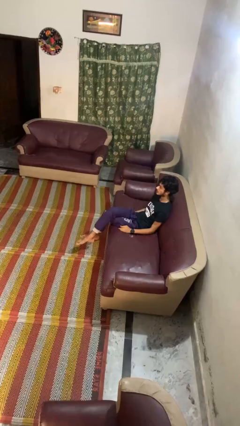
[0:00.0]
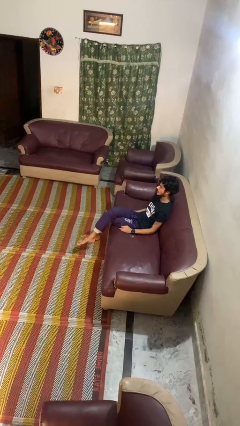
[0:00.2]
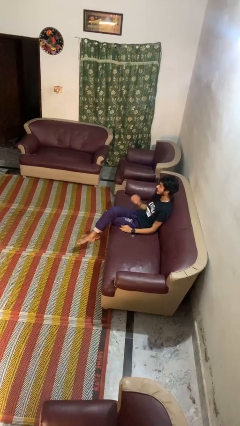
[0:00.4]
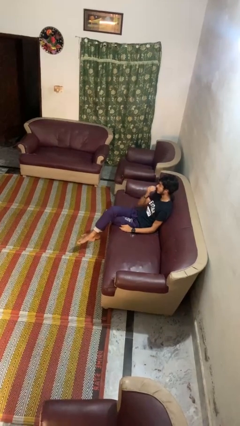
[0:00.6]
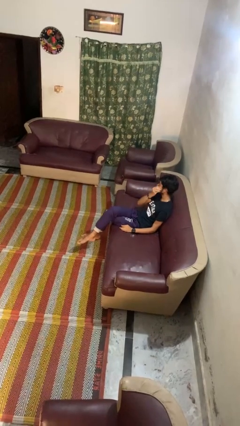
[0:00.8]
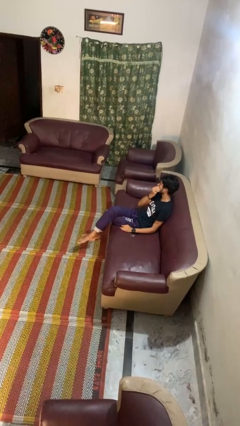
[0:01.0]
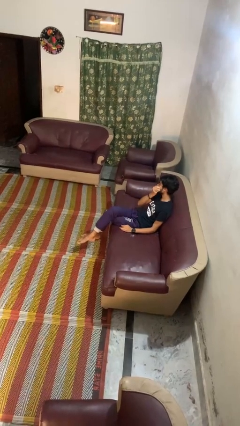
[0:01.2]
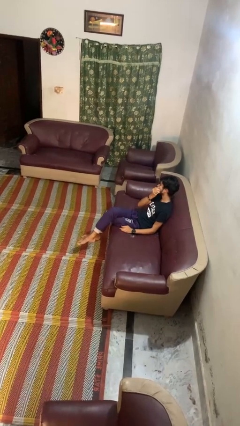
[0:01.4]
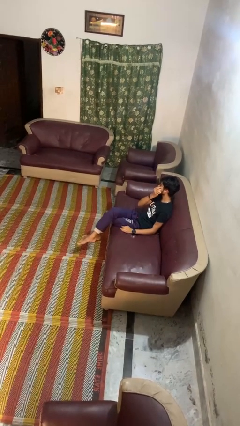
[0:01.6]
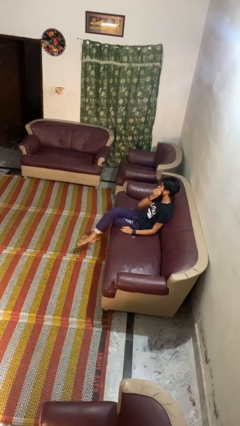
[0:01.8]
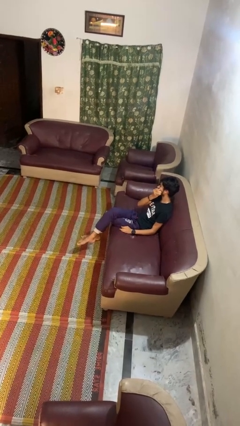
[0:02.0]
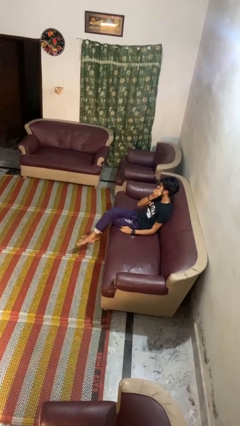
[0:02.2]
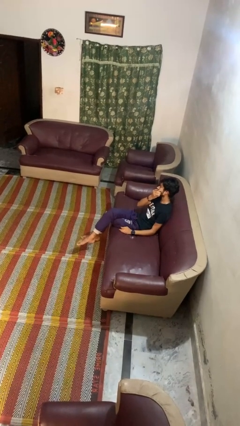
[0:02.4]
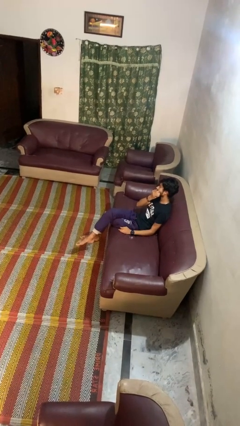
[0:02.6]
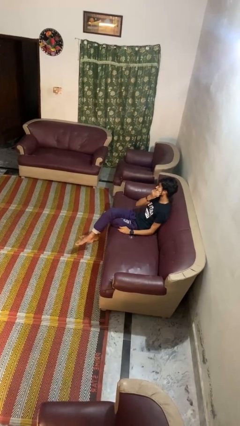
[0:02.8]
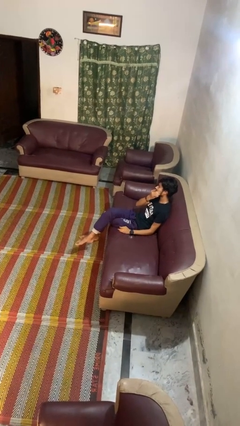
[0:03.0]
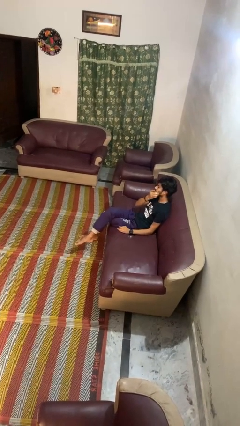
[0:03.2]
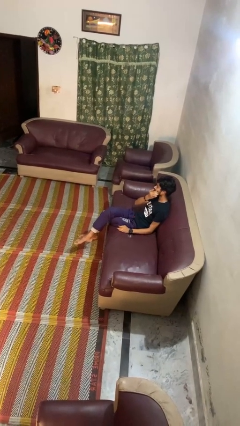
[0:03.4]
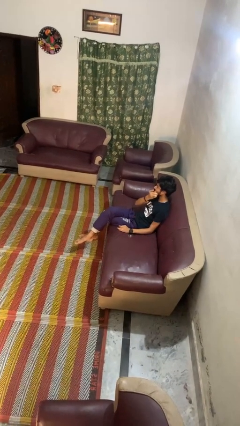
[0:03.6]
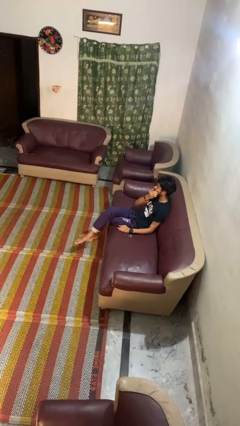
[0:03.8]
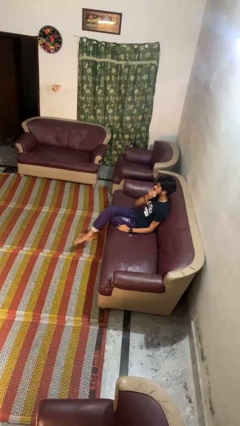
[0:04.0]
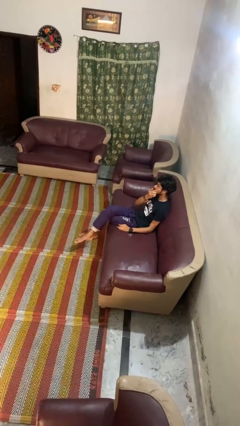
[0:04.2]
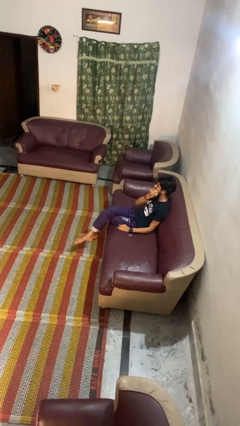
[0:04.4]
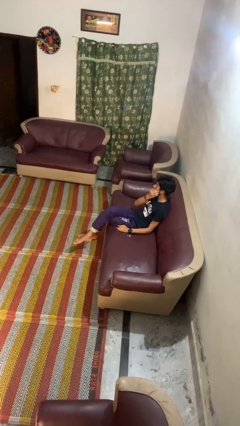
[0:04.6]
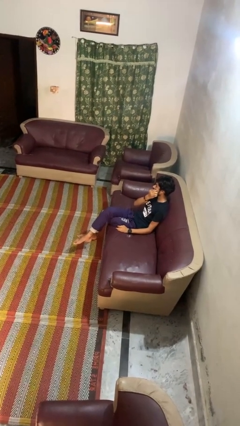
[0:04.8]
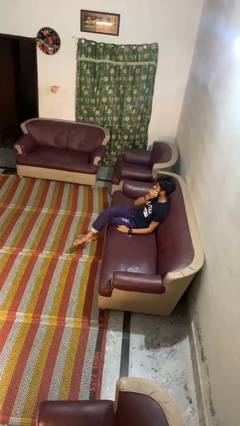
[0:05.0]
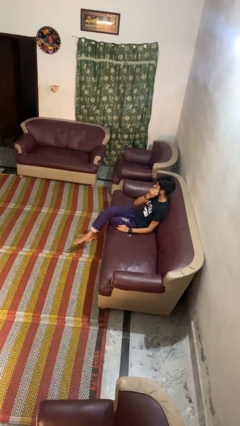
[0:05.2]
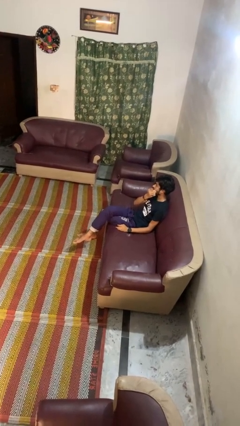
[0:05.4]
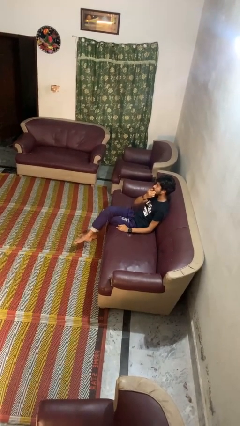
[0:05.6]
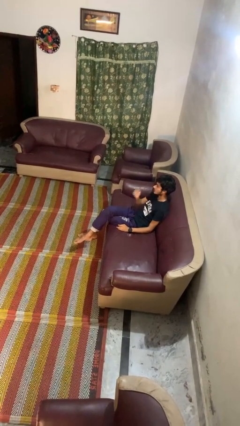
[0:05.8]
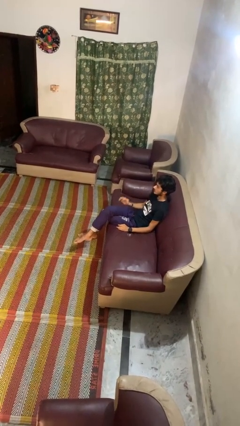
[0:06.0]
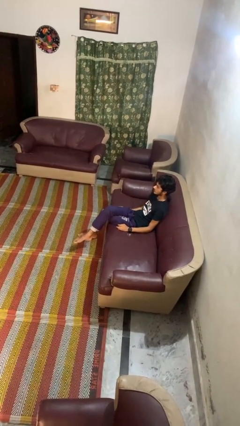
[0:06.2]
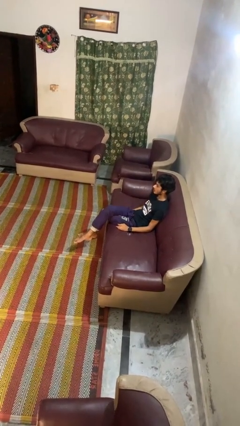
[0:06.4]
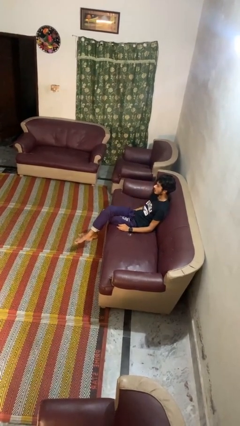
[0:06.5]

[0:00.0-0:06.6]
person scratches face

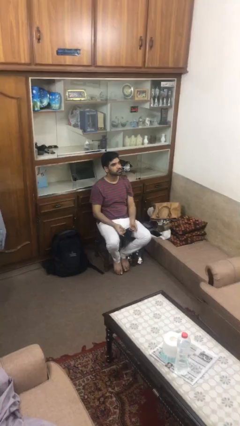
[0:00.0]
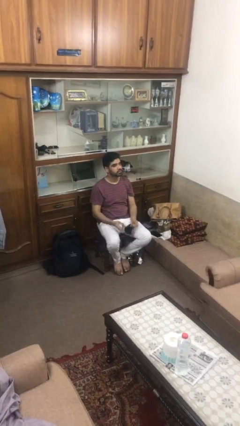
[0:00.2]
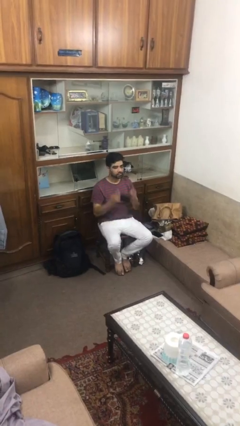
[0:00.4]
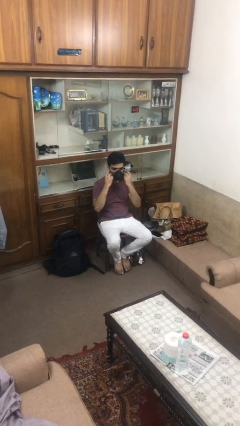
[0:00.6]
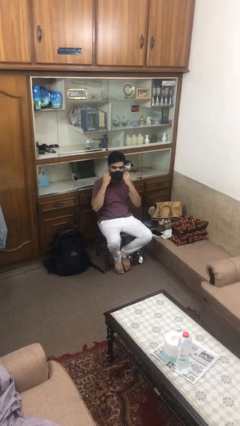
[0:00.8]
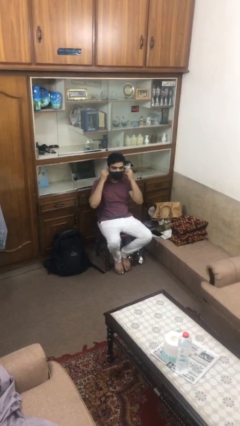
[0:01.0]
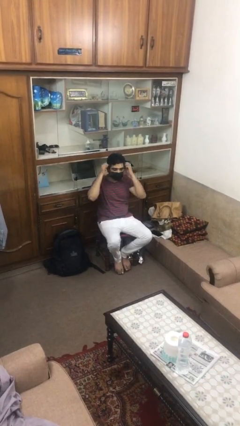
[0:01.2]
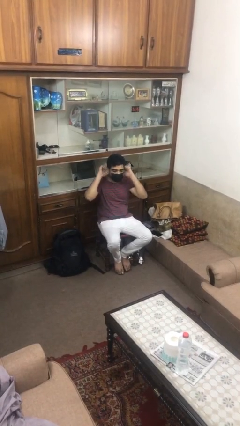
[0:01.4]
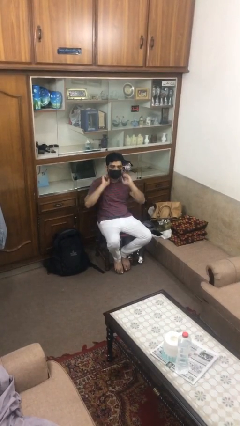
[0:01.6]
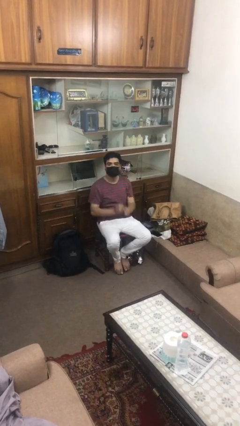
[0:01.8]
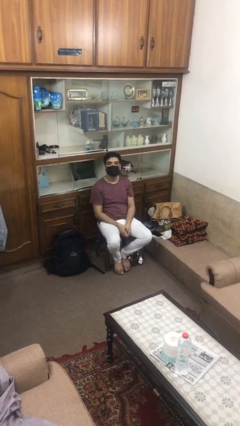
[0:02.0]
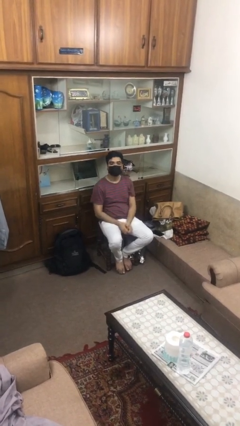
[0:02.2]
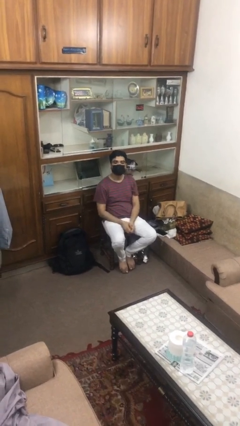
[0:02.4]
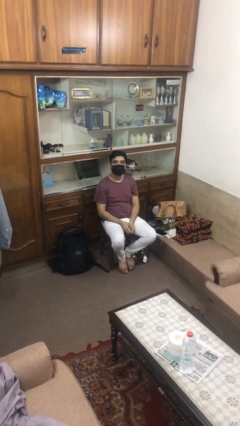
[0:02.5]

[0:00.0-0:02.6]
person puts on facemask

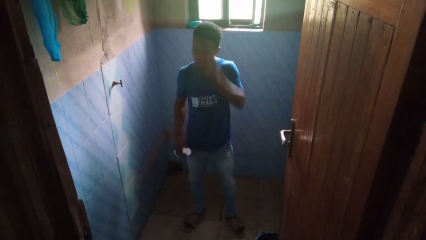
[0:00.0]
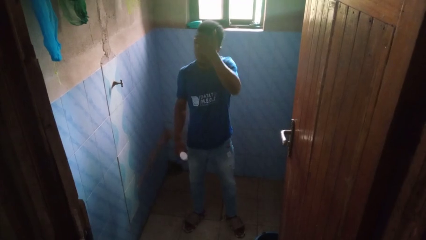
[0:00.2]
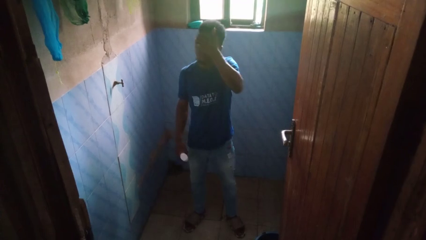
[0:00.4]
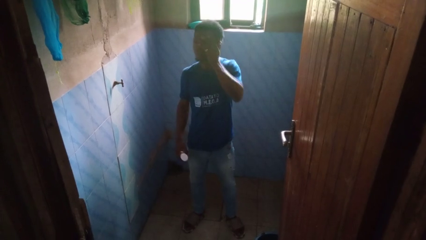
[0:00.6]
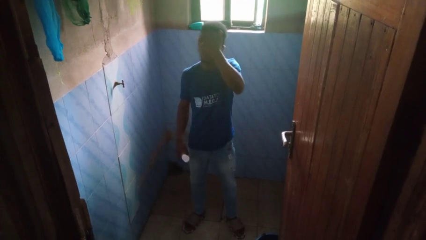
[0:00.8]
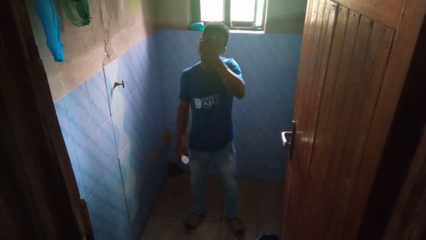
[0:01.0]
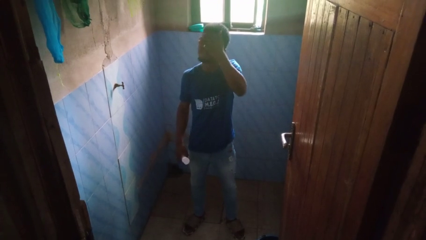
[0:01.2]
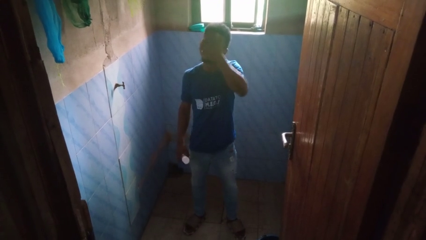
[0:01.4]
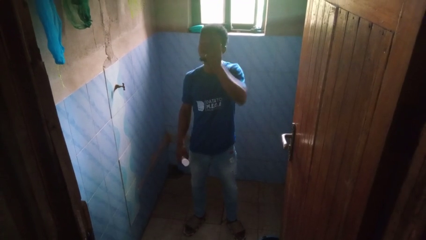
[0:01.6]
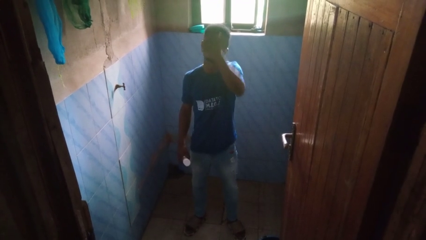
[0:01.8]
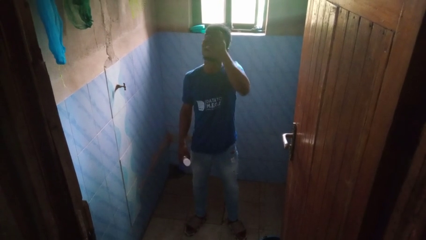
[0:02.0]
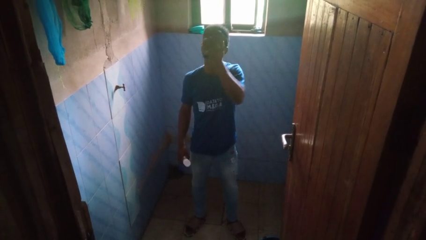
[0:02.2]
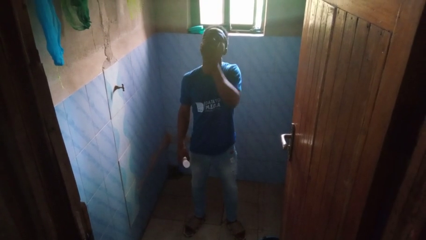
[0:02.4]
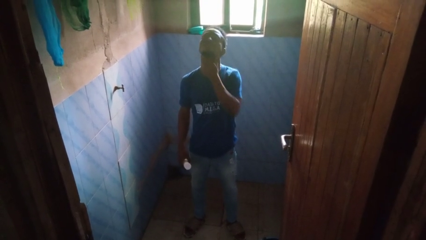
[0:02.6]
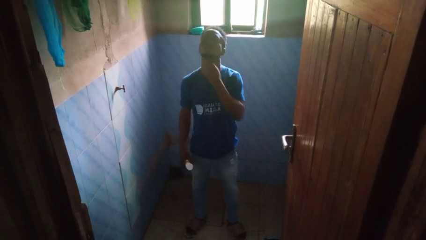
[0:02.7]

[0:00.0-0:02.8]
person applies facial moisturizer

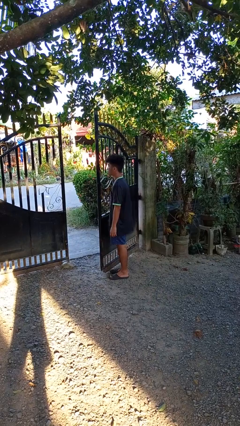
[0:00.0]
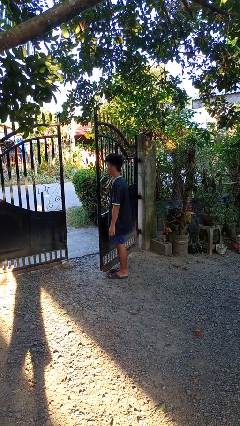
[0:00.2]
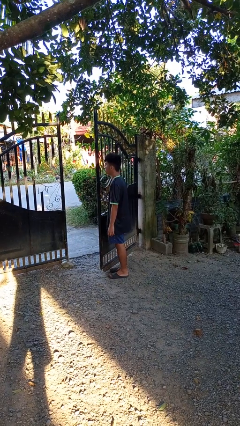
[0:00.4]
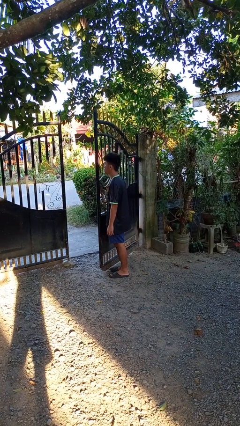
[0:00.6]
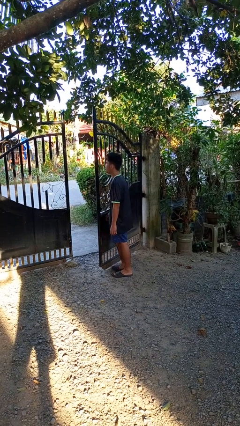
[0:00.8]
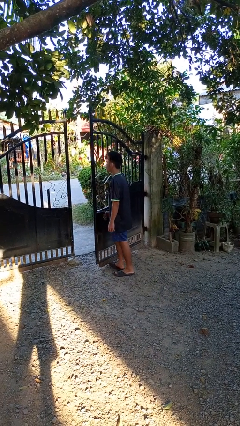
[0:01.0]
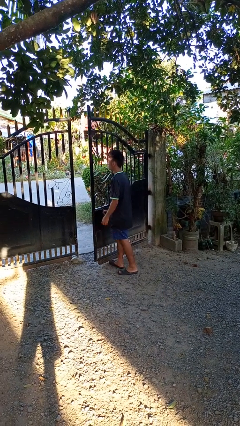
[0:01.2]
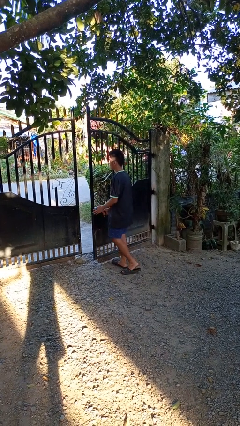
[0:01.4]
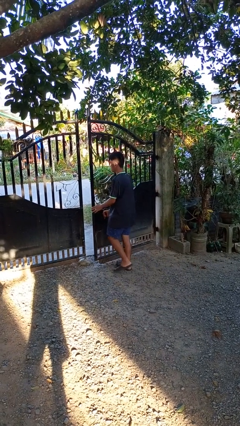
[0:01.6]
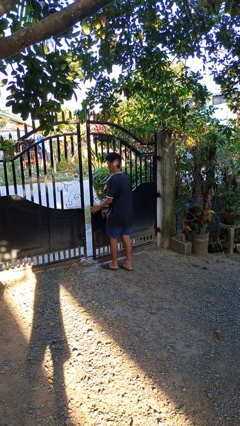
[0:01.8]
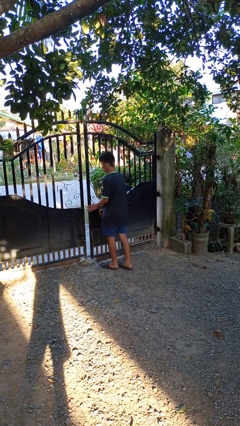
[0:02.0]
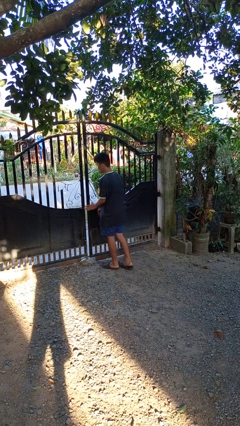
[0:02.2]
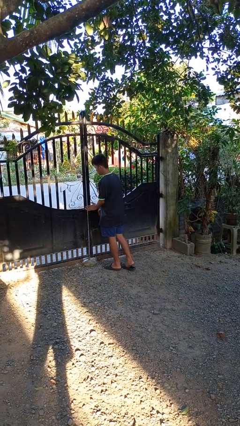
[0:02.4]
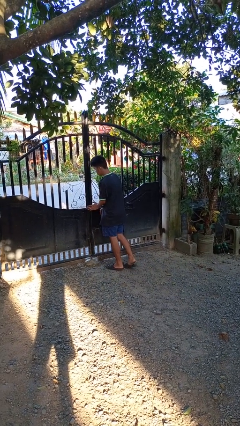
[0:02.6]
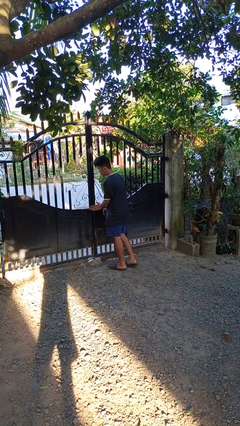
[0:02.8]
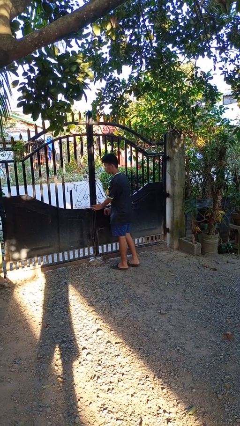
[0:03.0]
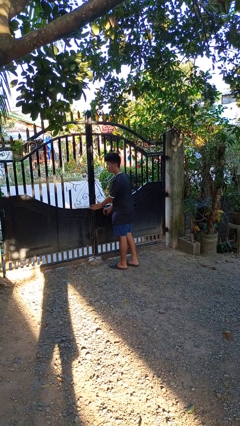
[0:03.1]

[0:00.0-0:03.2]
person closes gate

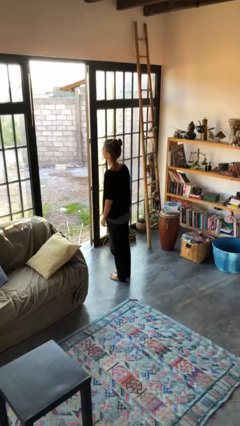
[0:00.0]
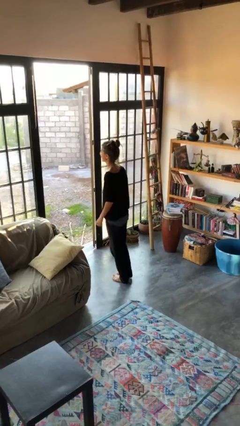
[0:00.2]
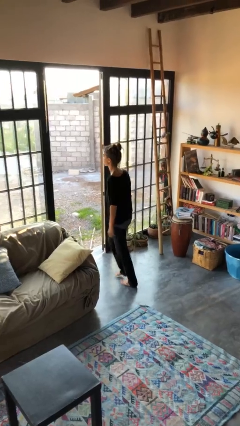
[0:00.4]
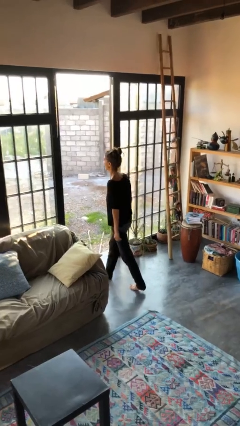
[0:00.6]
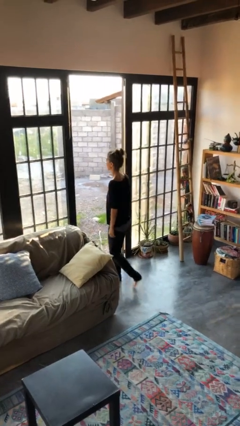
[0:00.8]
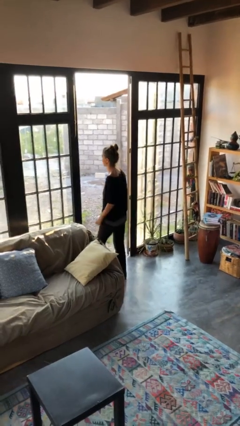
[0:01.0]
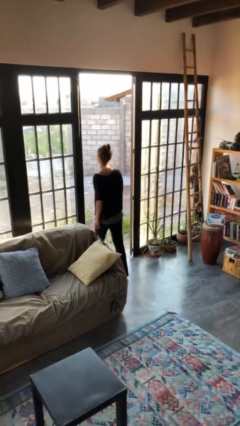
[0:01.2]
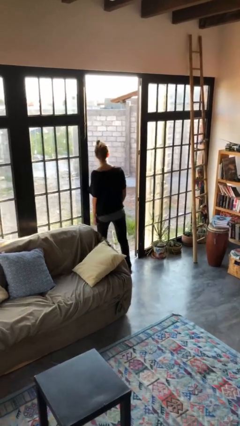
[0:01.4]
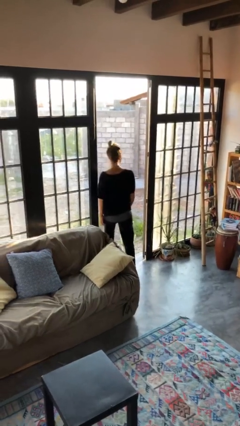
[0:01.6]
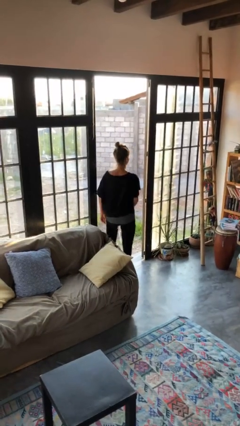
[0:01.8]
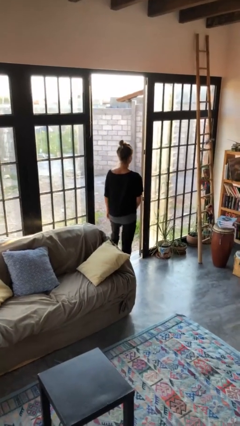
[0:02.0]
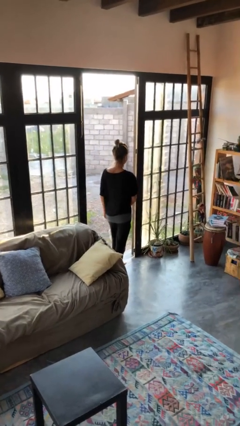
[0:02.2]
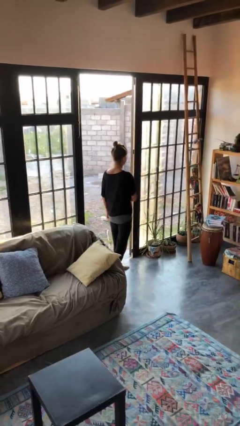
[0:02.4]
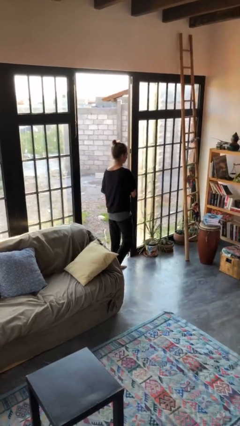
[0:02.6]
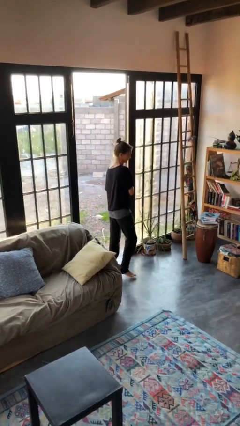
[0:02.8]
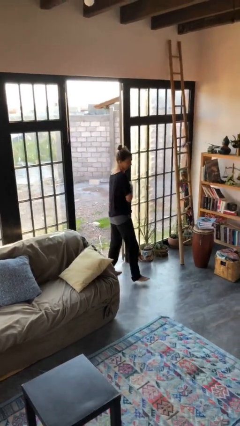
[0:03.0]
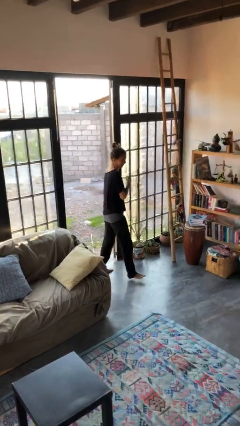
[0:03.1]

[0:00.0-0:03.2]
person bumps into wall
